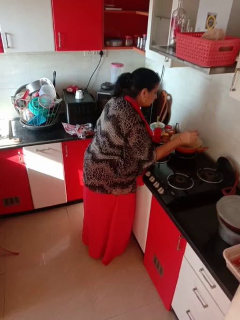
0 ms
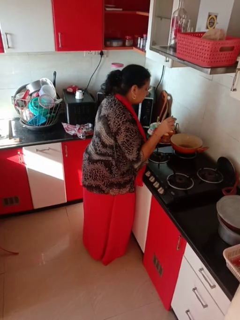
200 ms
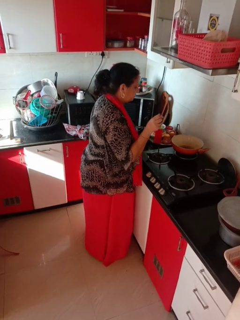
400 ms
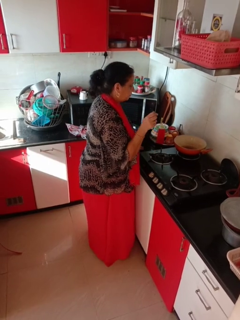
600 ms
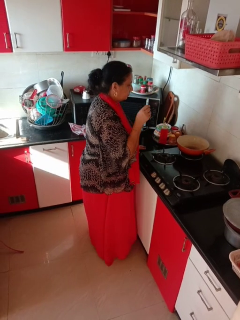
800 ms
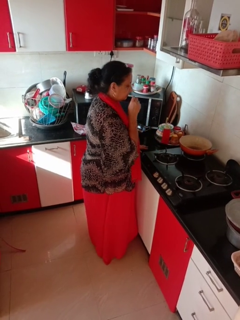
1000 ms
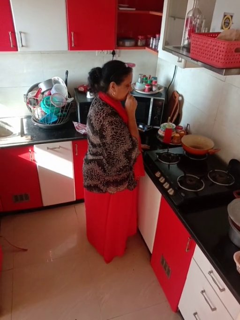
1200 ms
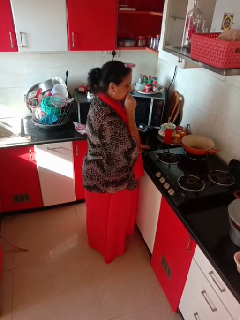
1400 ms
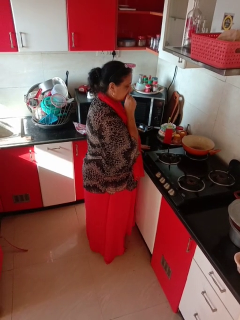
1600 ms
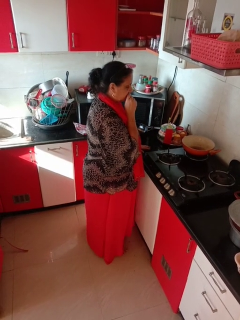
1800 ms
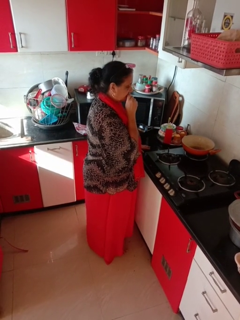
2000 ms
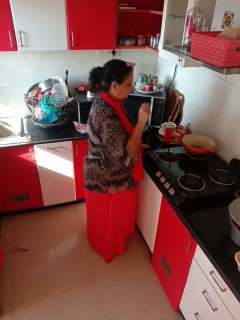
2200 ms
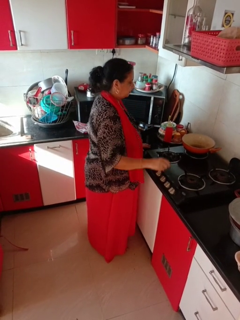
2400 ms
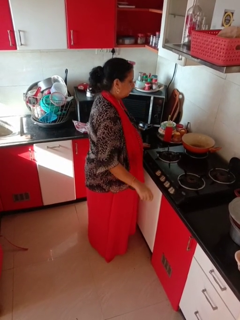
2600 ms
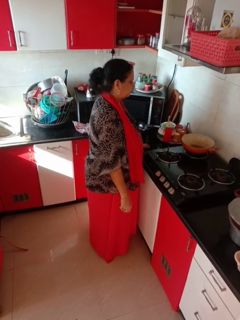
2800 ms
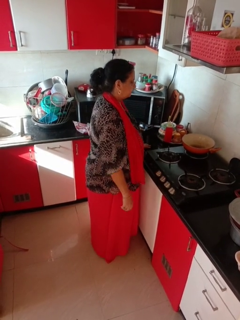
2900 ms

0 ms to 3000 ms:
person burns hand

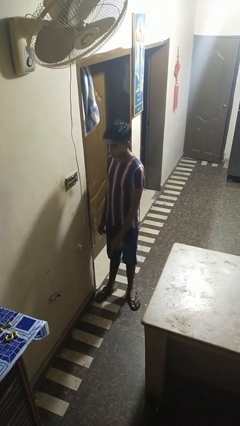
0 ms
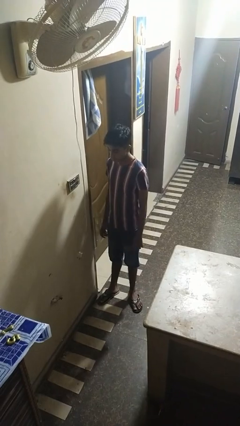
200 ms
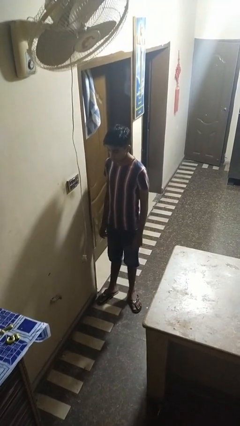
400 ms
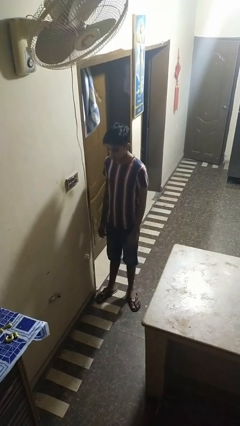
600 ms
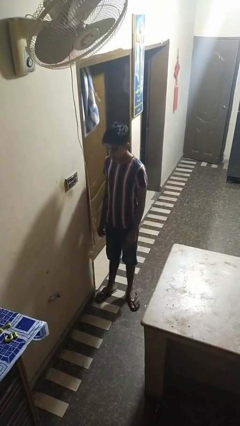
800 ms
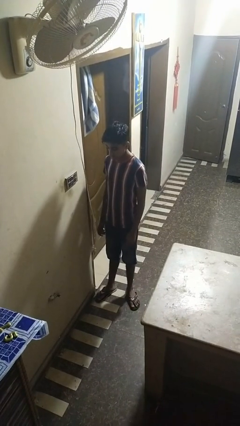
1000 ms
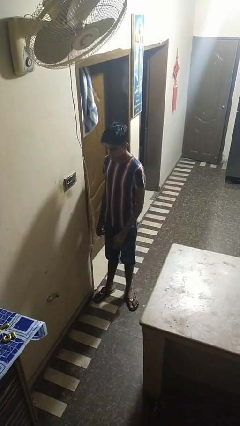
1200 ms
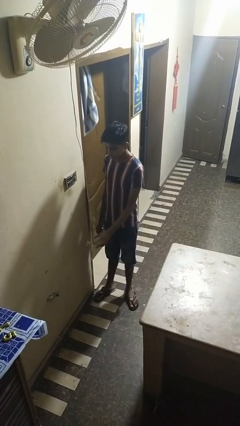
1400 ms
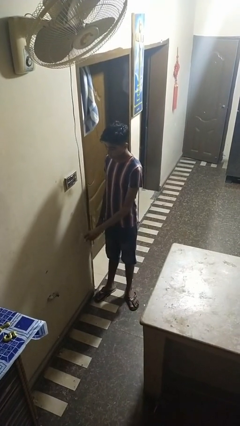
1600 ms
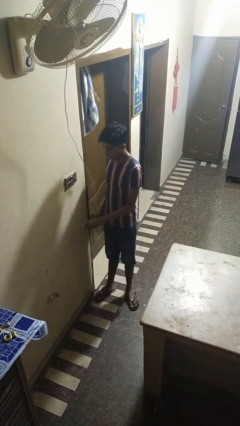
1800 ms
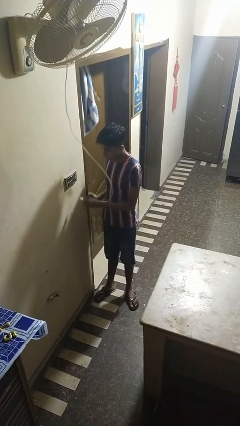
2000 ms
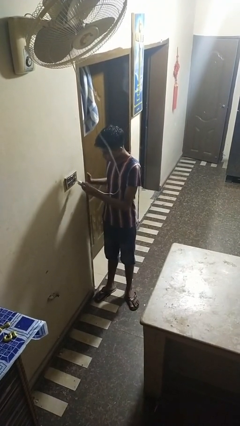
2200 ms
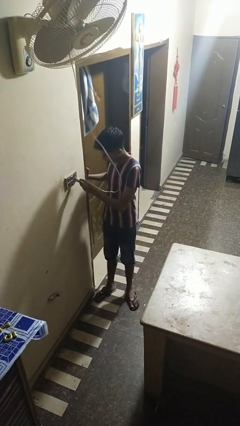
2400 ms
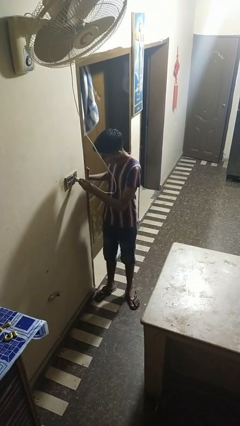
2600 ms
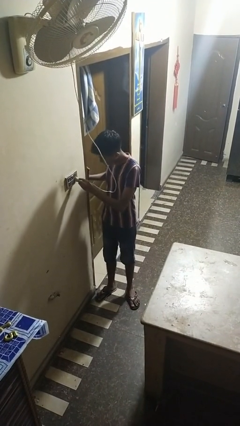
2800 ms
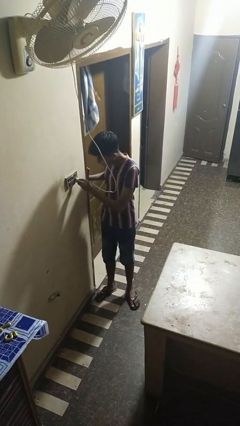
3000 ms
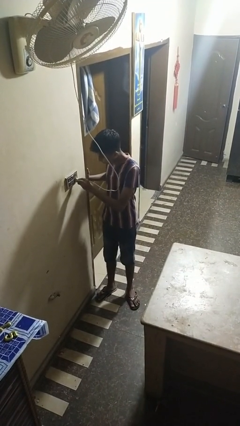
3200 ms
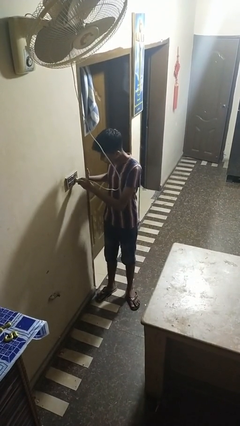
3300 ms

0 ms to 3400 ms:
person plugs into electrical socket

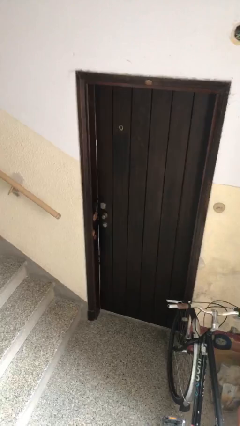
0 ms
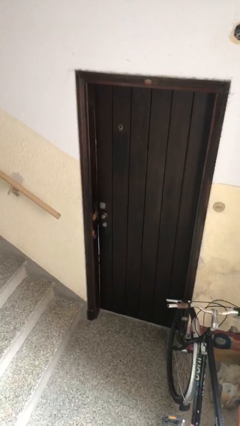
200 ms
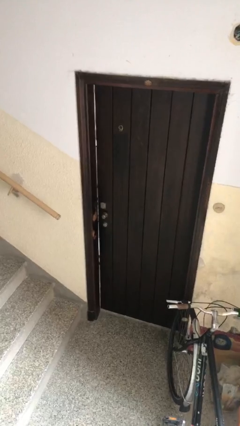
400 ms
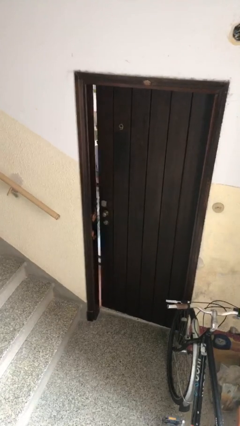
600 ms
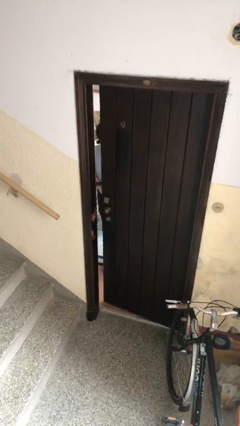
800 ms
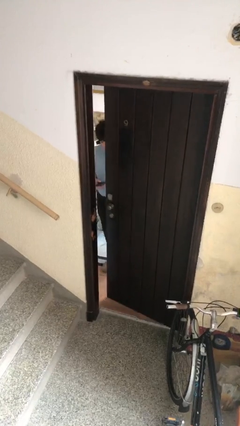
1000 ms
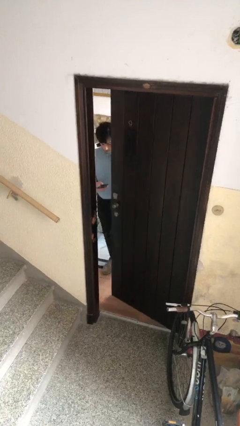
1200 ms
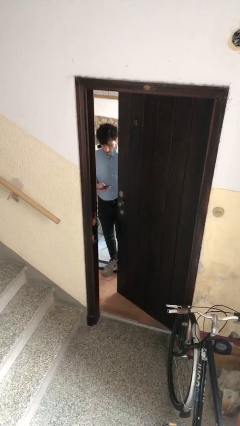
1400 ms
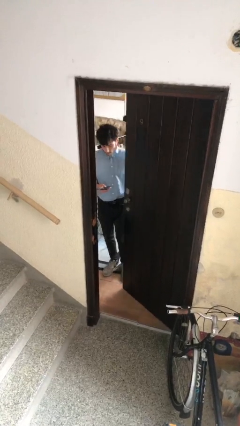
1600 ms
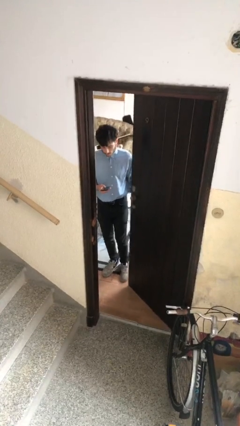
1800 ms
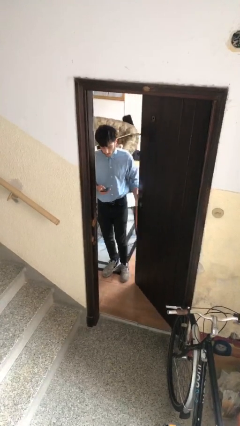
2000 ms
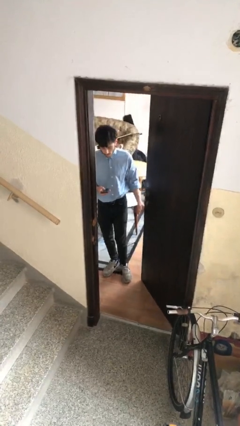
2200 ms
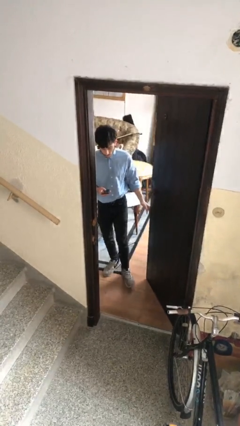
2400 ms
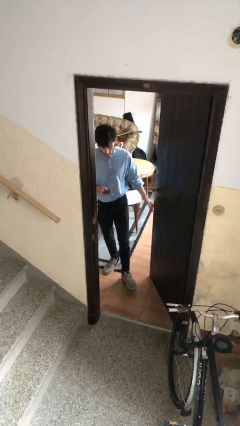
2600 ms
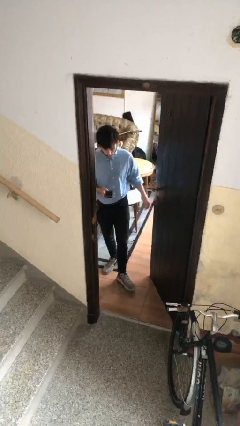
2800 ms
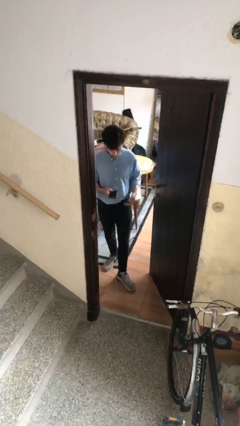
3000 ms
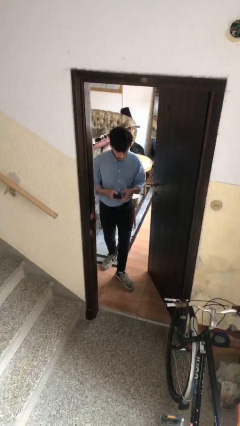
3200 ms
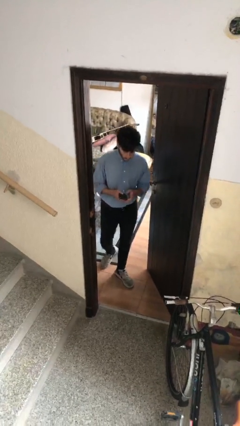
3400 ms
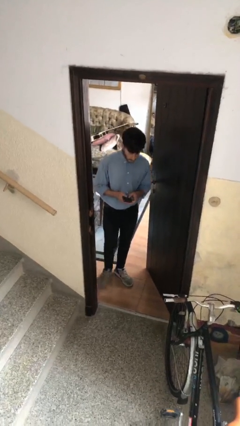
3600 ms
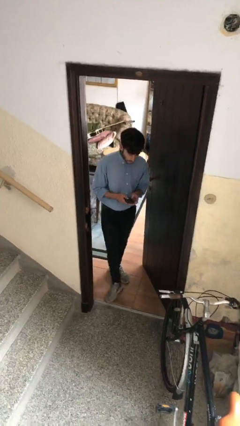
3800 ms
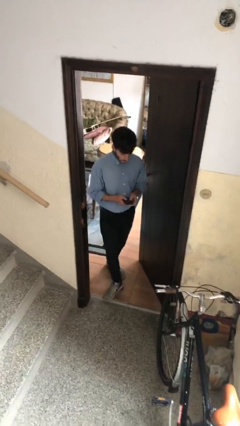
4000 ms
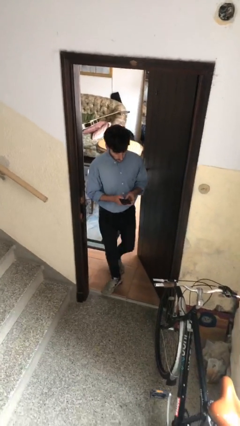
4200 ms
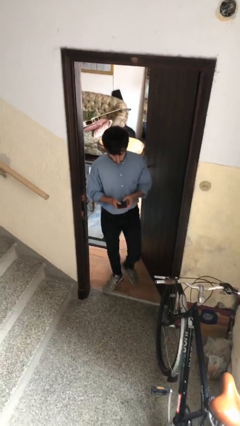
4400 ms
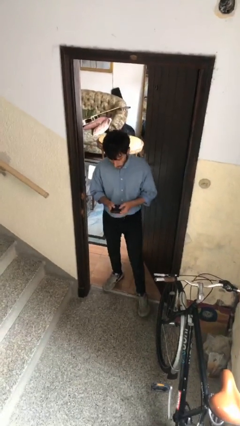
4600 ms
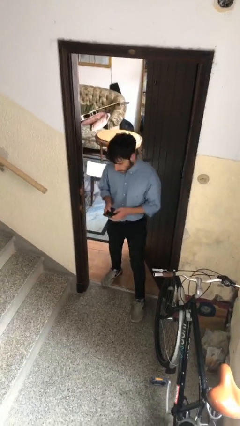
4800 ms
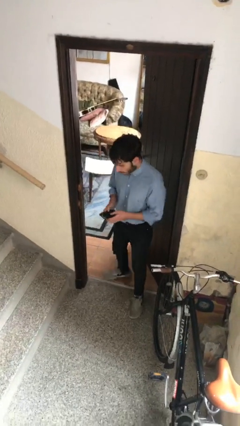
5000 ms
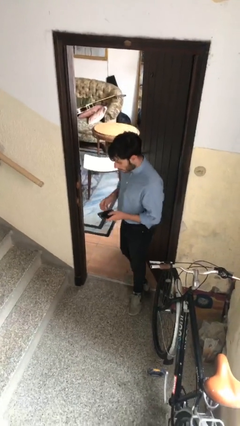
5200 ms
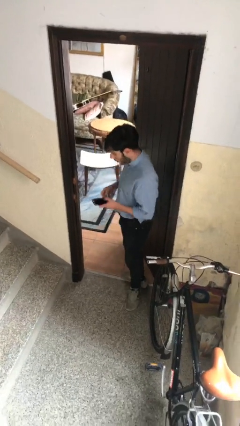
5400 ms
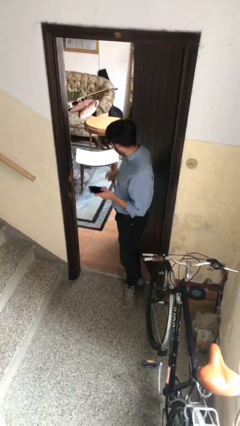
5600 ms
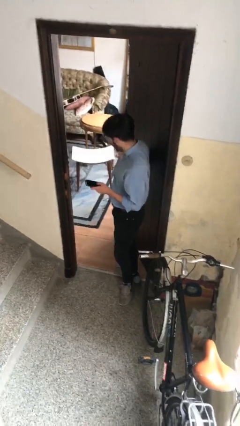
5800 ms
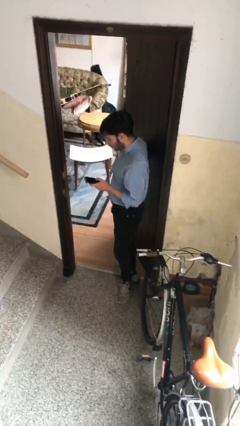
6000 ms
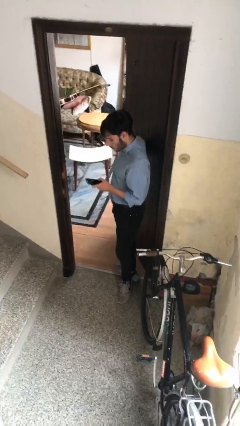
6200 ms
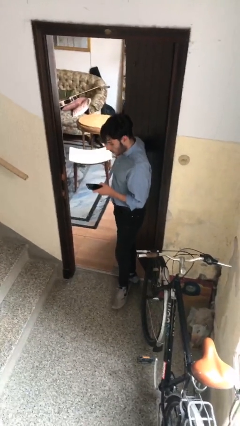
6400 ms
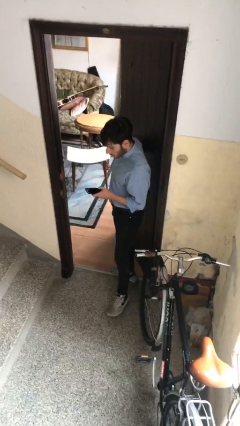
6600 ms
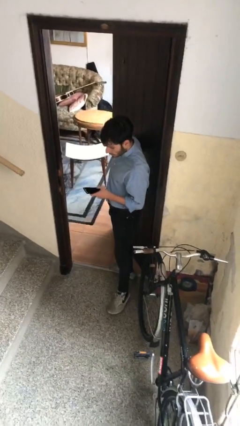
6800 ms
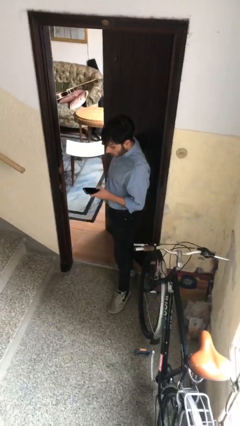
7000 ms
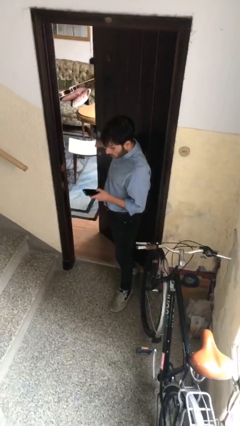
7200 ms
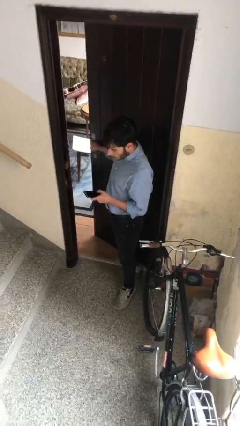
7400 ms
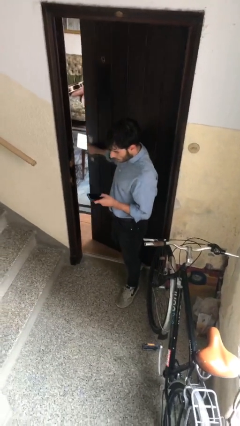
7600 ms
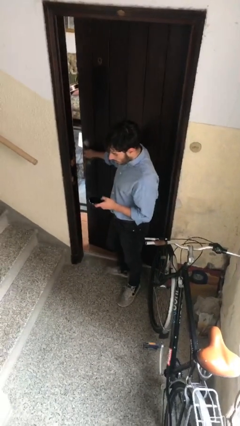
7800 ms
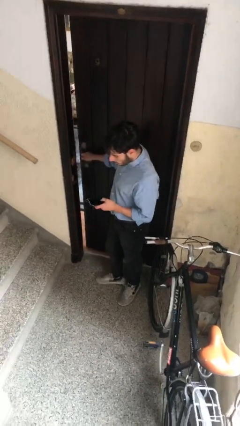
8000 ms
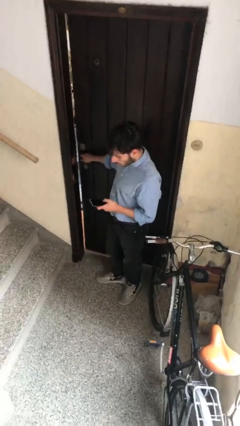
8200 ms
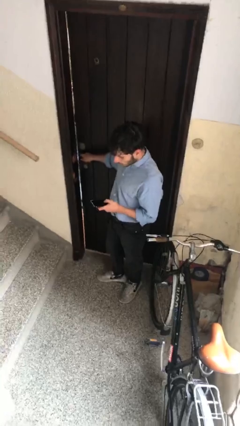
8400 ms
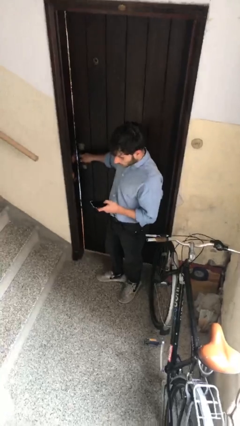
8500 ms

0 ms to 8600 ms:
person texts on phone

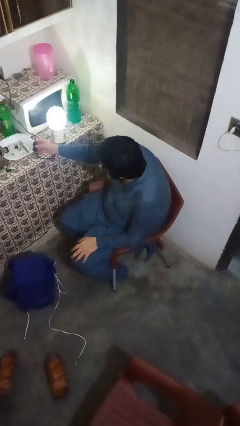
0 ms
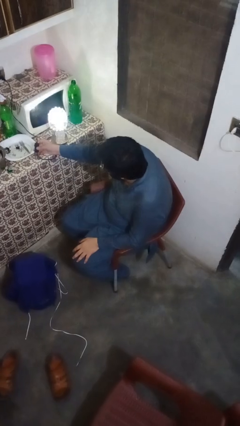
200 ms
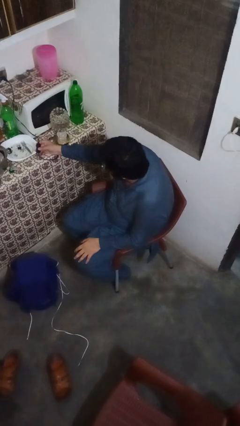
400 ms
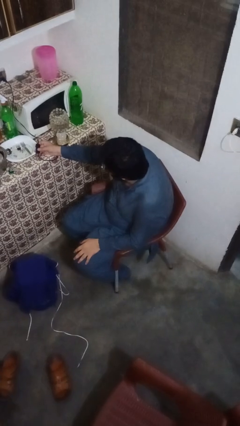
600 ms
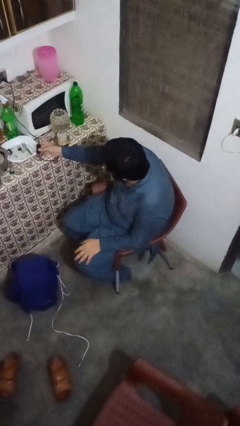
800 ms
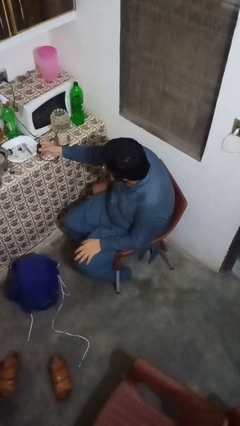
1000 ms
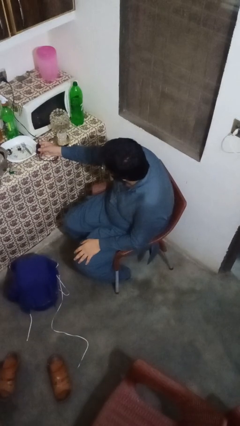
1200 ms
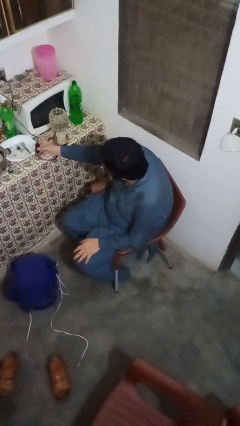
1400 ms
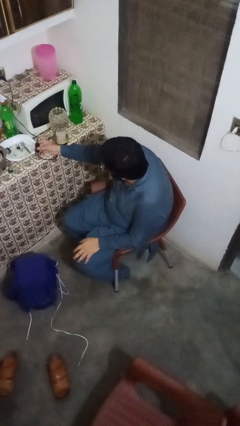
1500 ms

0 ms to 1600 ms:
person turns off lamp

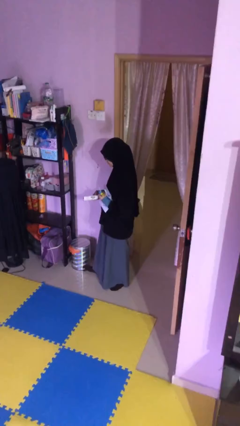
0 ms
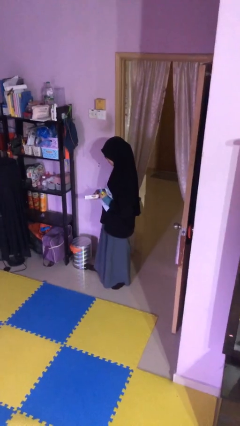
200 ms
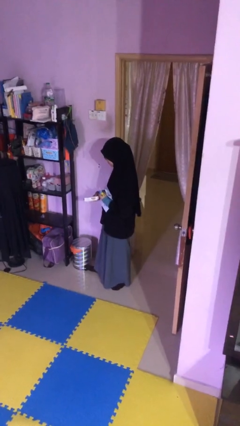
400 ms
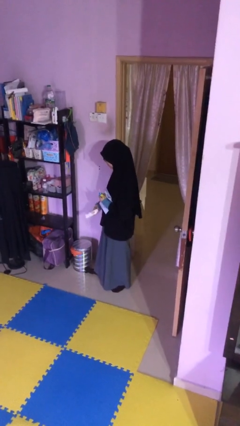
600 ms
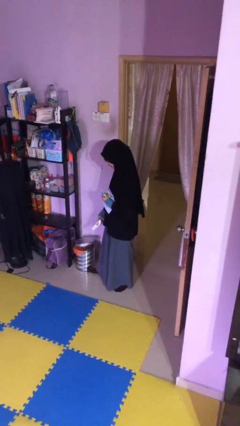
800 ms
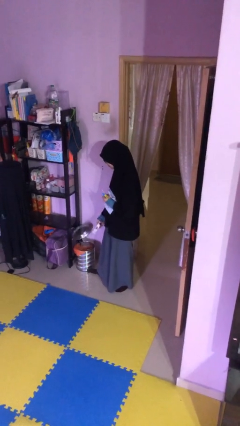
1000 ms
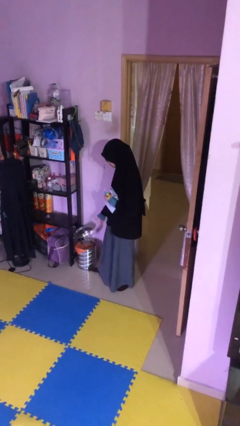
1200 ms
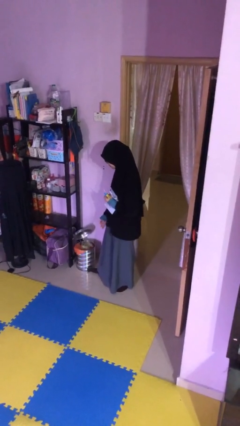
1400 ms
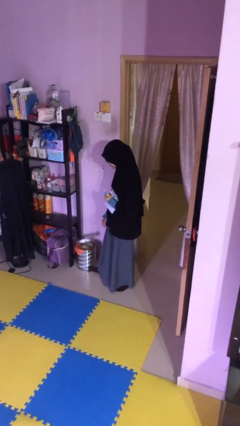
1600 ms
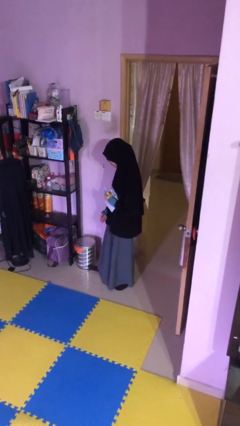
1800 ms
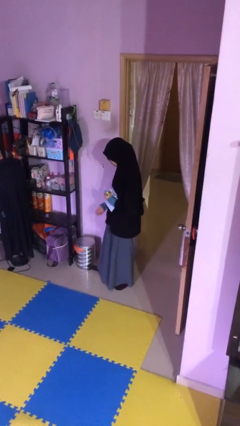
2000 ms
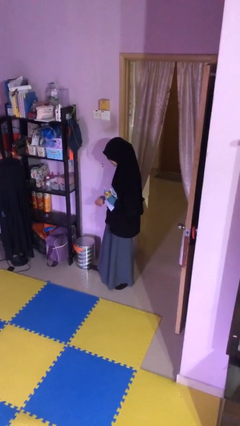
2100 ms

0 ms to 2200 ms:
person discards trash
